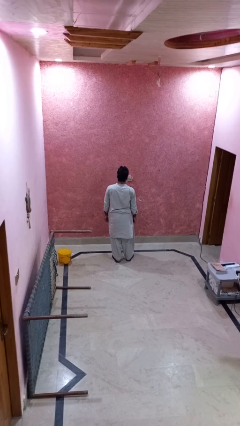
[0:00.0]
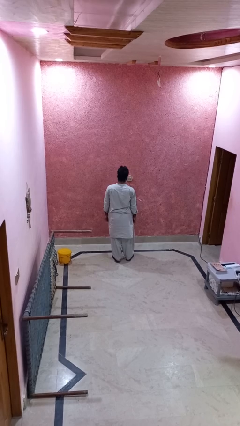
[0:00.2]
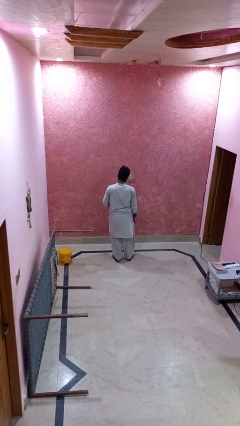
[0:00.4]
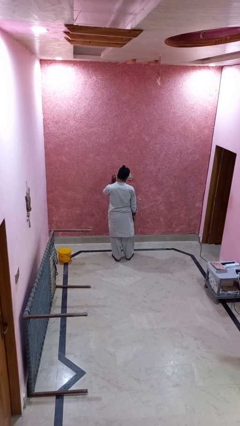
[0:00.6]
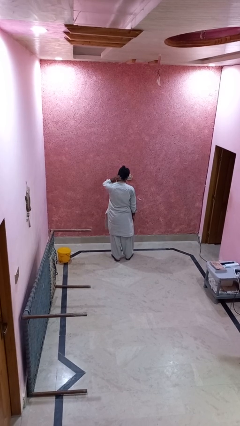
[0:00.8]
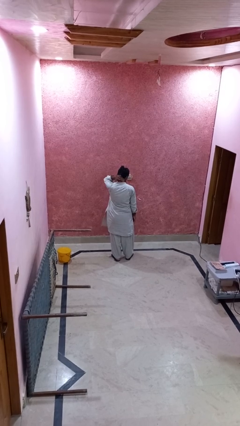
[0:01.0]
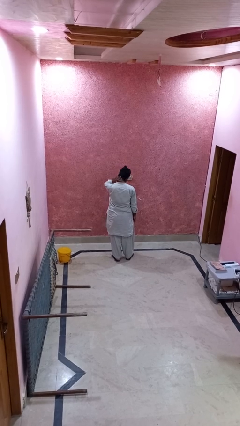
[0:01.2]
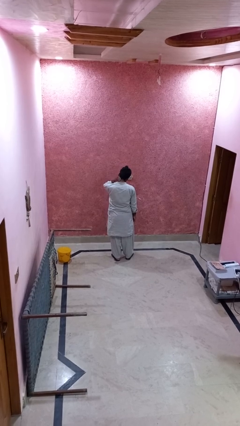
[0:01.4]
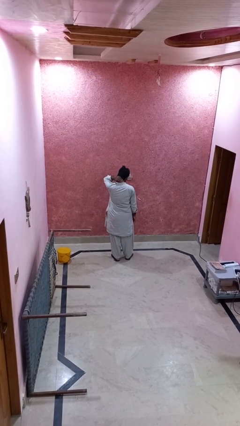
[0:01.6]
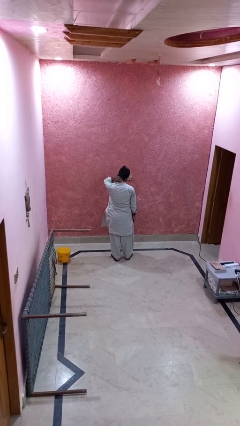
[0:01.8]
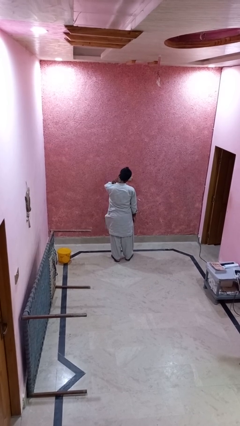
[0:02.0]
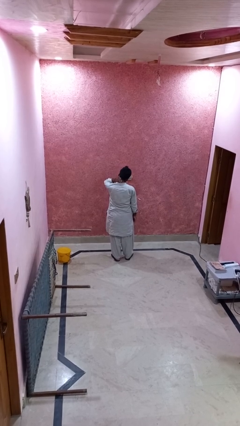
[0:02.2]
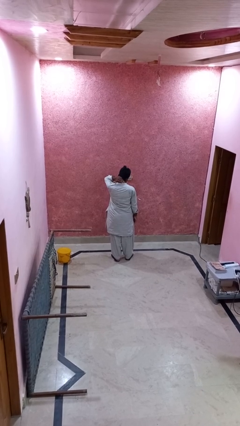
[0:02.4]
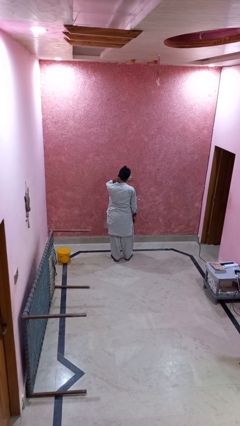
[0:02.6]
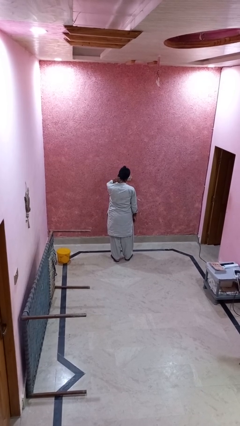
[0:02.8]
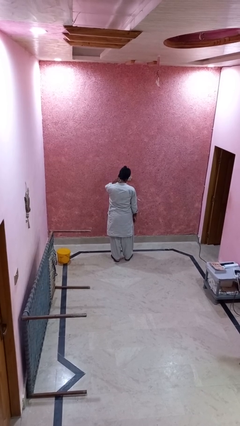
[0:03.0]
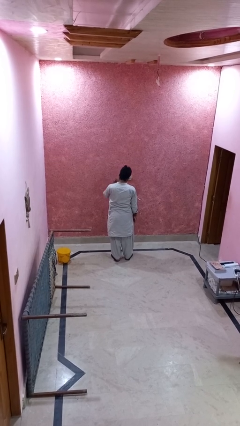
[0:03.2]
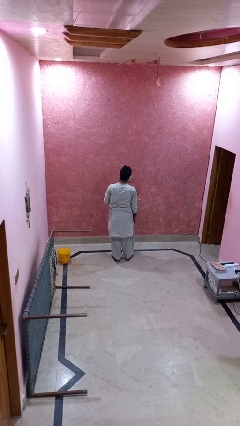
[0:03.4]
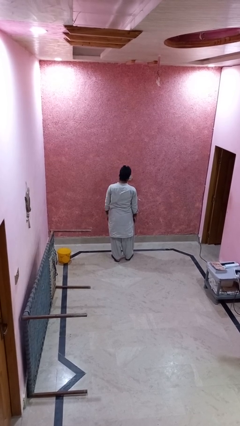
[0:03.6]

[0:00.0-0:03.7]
person rubs neck

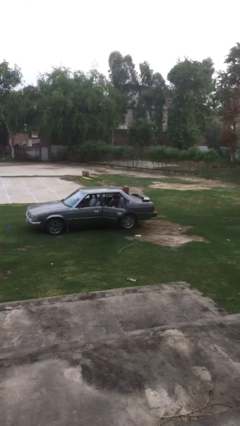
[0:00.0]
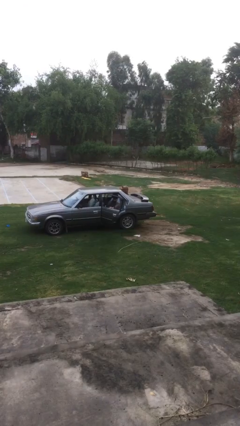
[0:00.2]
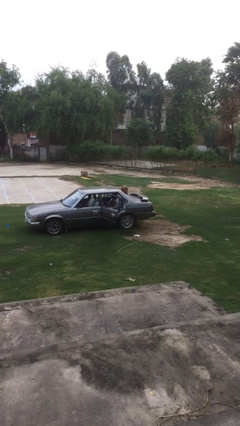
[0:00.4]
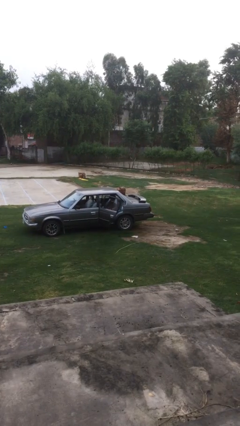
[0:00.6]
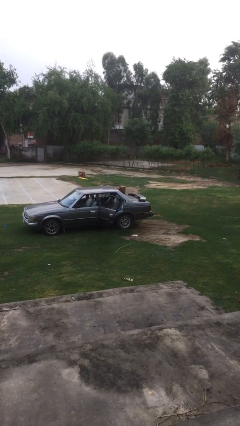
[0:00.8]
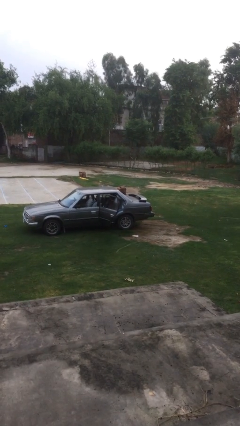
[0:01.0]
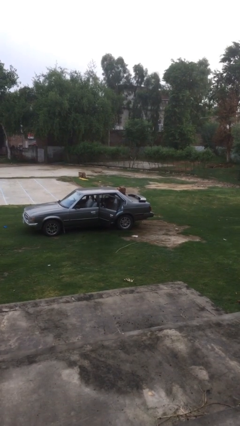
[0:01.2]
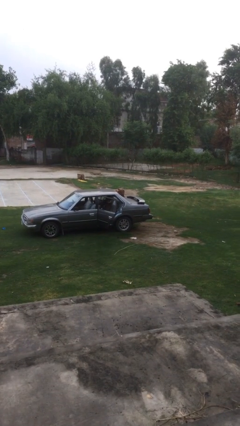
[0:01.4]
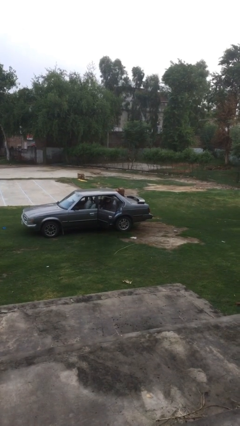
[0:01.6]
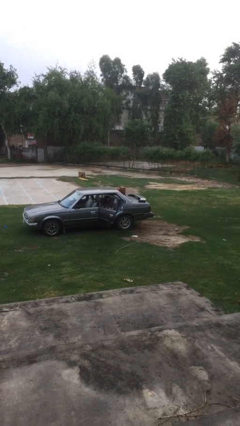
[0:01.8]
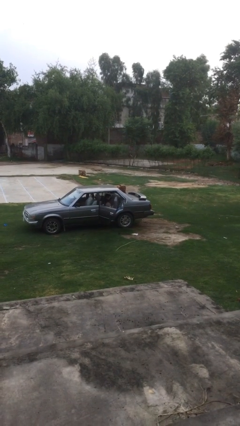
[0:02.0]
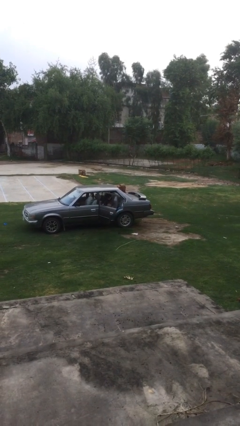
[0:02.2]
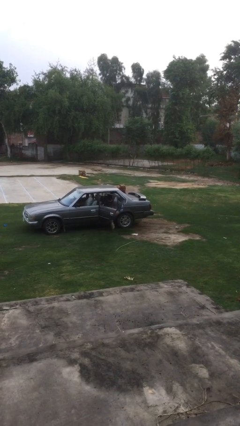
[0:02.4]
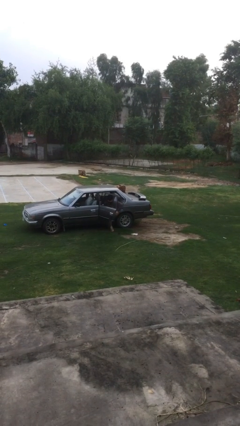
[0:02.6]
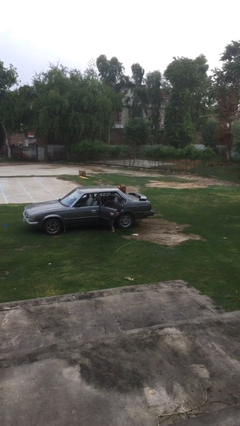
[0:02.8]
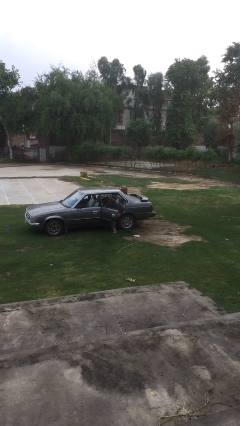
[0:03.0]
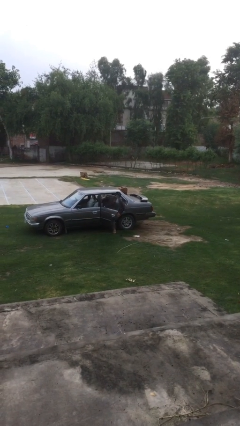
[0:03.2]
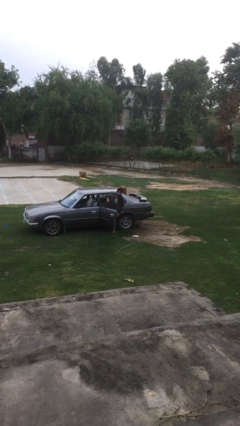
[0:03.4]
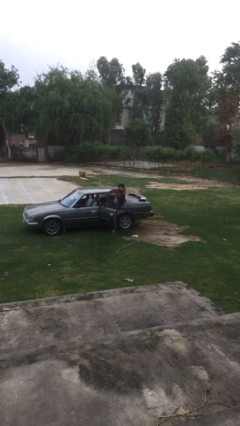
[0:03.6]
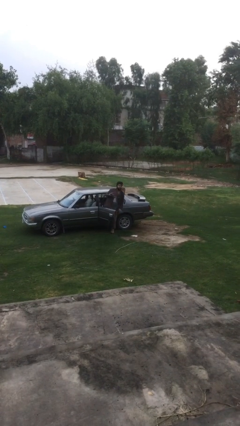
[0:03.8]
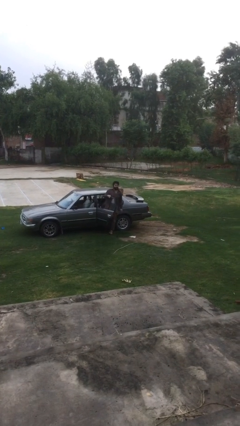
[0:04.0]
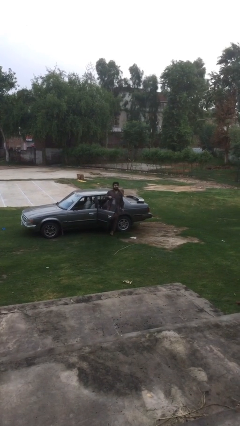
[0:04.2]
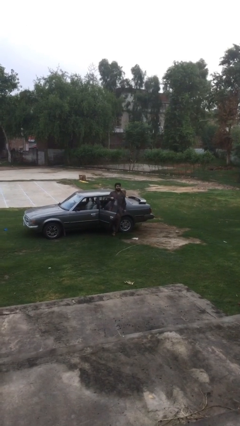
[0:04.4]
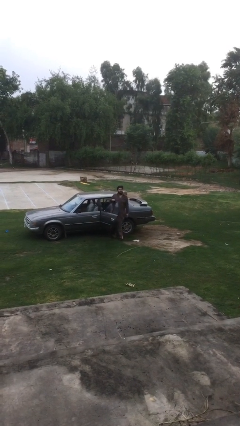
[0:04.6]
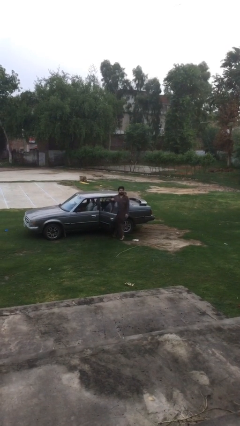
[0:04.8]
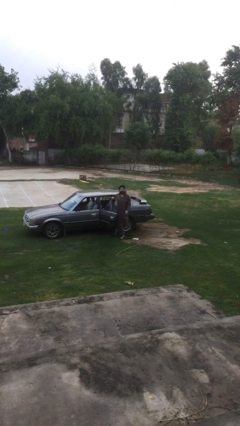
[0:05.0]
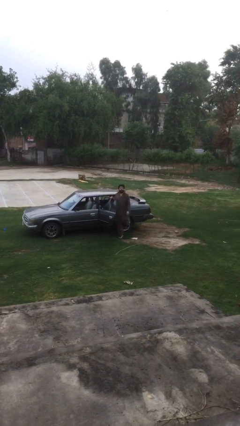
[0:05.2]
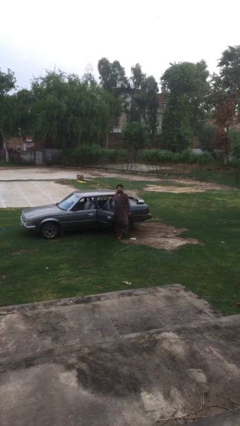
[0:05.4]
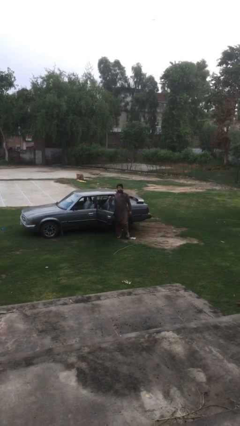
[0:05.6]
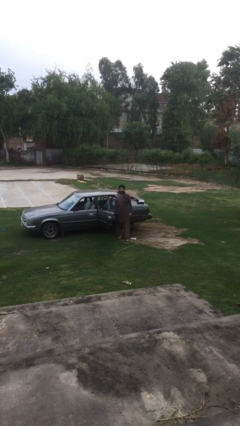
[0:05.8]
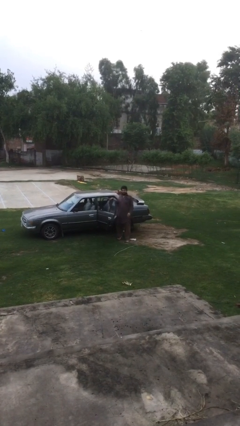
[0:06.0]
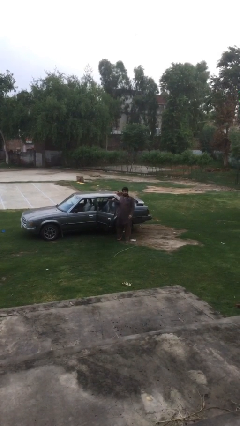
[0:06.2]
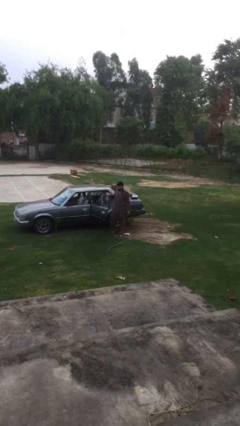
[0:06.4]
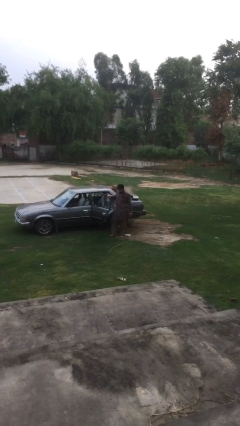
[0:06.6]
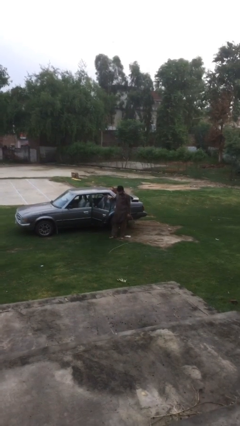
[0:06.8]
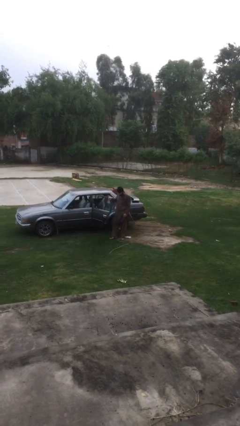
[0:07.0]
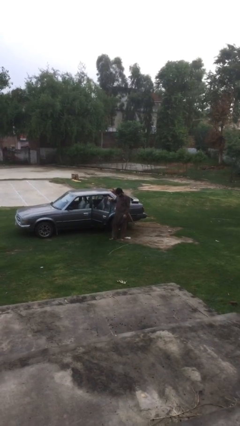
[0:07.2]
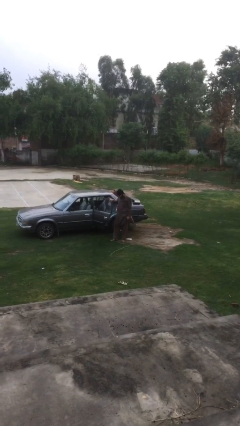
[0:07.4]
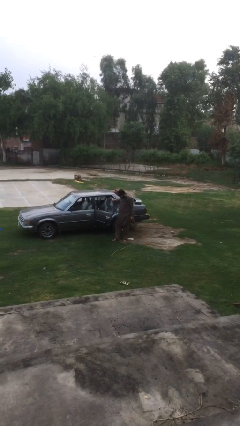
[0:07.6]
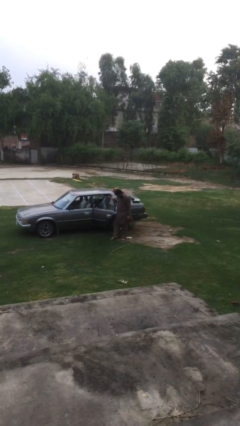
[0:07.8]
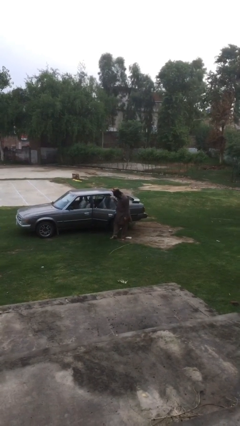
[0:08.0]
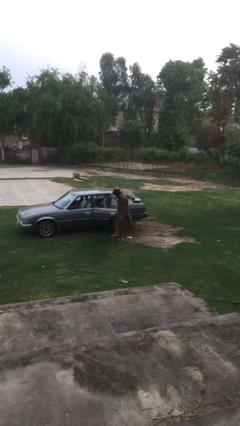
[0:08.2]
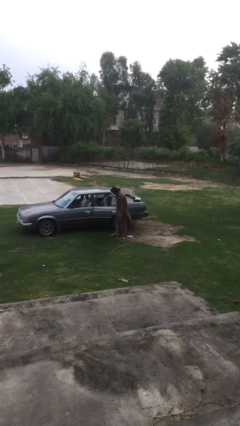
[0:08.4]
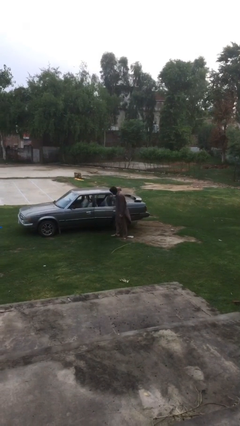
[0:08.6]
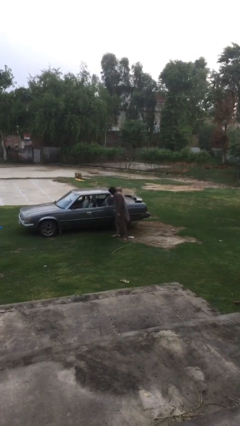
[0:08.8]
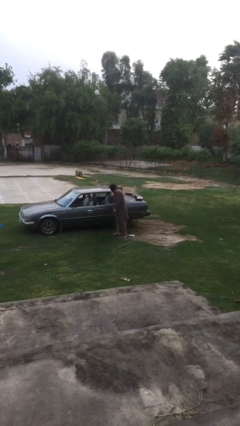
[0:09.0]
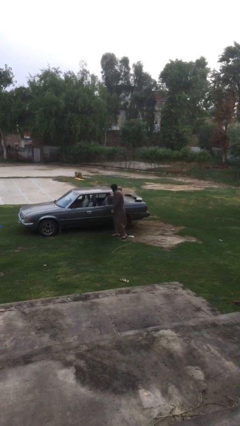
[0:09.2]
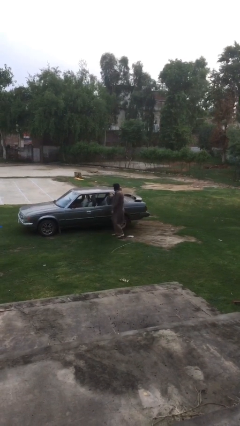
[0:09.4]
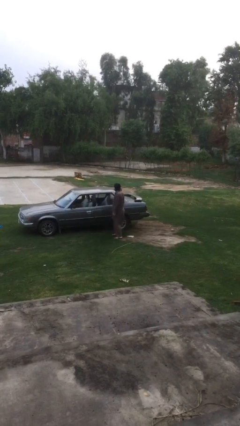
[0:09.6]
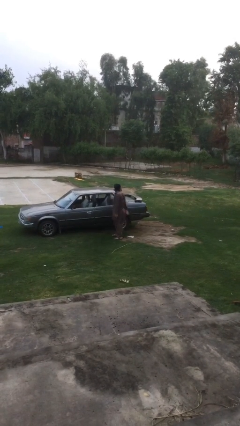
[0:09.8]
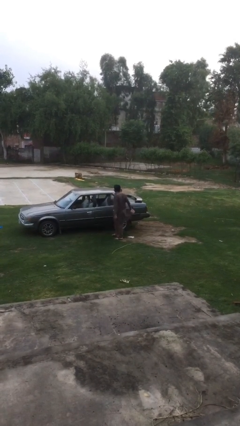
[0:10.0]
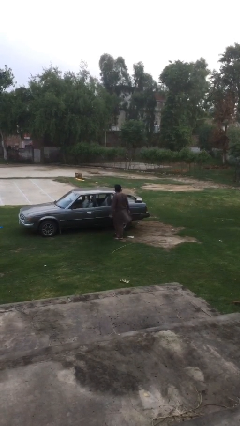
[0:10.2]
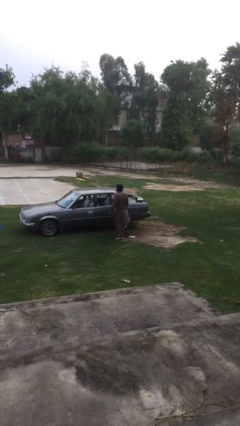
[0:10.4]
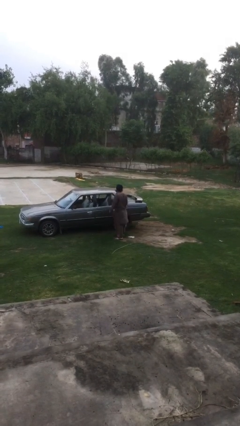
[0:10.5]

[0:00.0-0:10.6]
person exits car

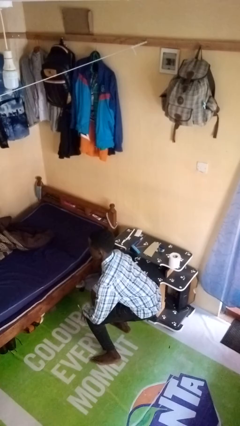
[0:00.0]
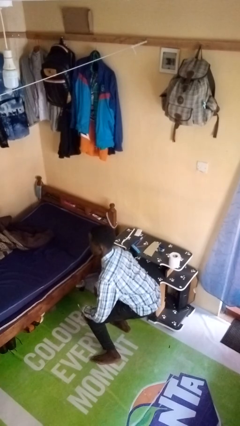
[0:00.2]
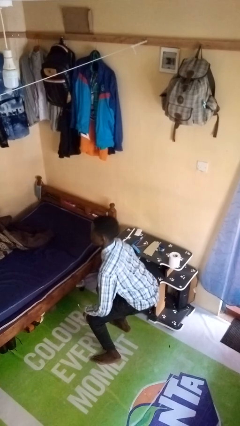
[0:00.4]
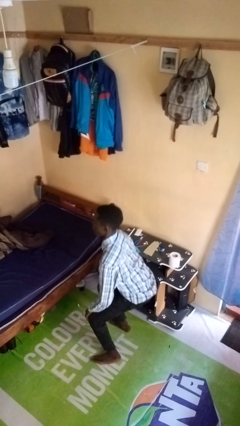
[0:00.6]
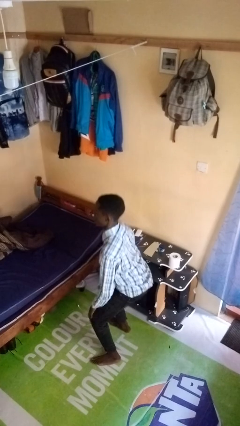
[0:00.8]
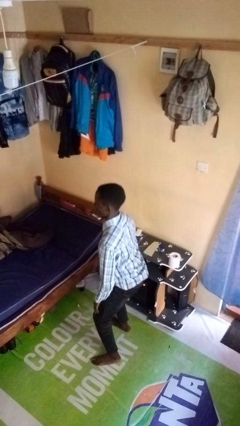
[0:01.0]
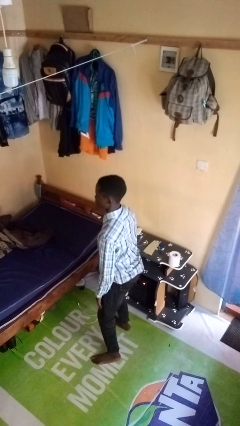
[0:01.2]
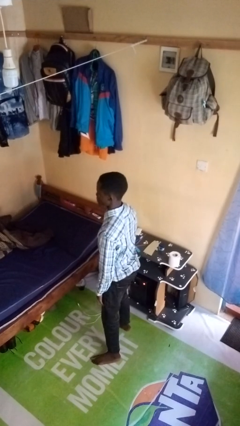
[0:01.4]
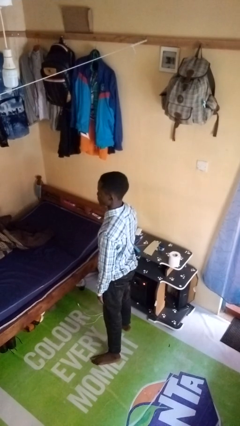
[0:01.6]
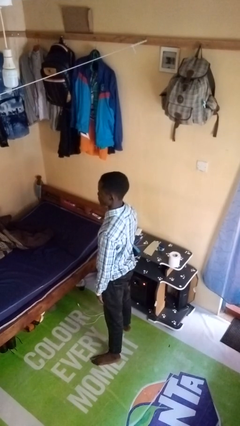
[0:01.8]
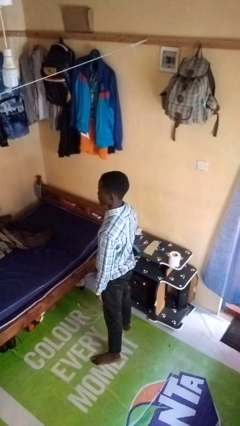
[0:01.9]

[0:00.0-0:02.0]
person stands up

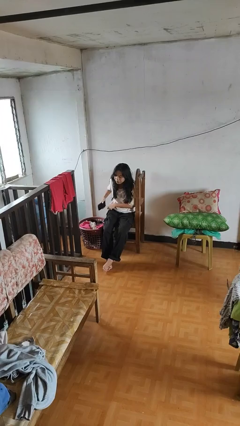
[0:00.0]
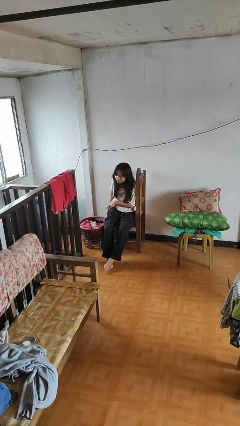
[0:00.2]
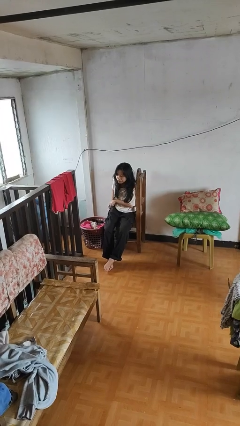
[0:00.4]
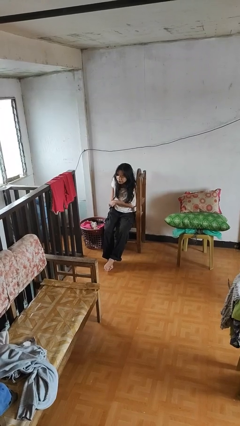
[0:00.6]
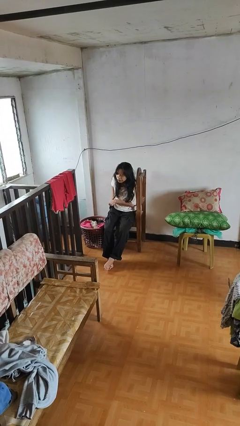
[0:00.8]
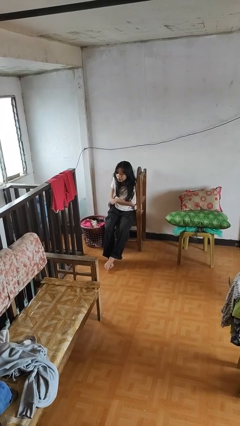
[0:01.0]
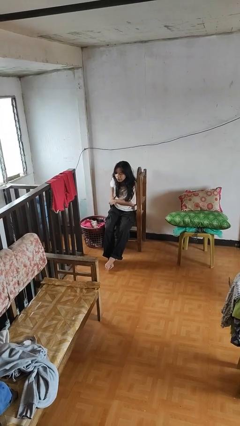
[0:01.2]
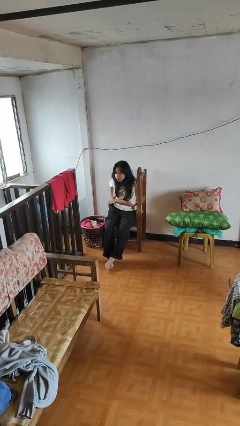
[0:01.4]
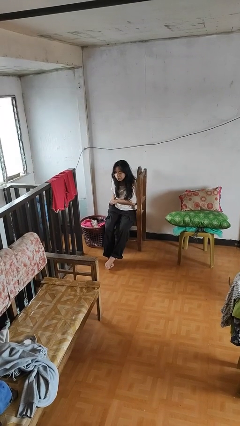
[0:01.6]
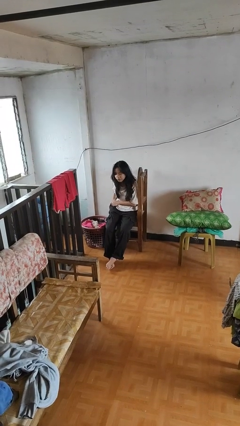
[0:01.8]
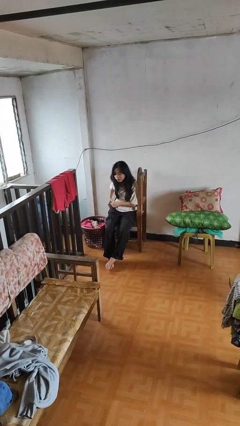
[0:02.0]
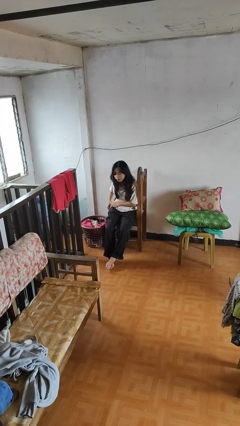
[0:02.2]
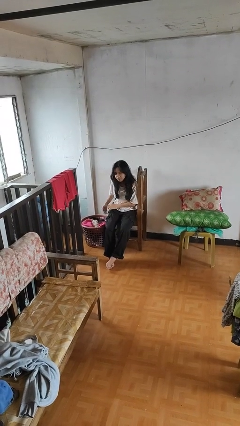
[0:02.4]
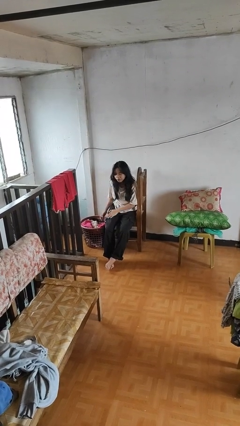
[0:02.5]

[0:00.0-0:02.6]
person puts phone into pocket
